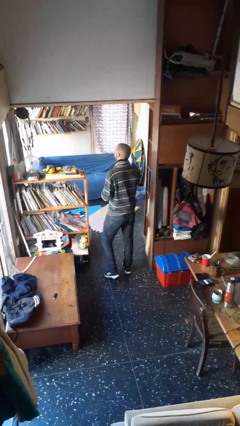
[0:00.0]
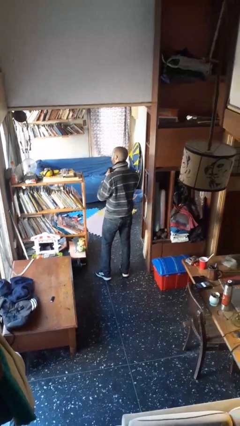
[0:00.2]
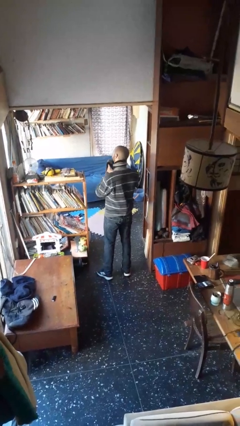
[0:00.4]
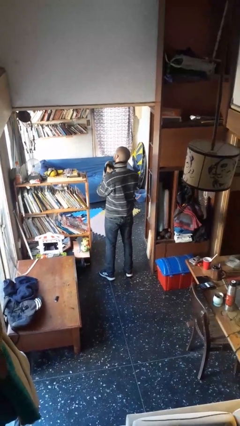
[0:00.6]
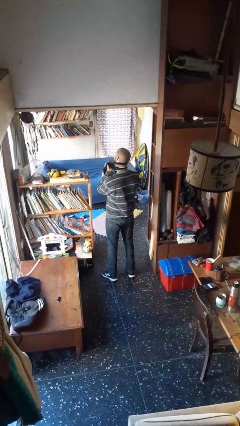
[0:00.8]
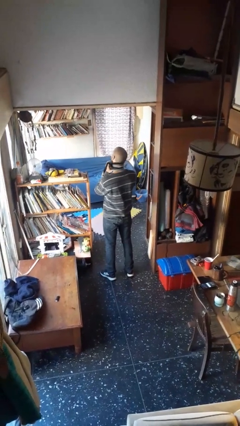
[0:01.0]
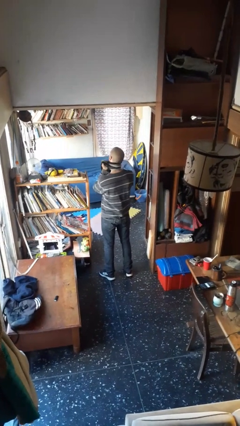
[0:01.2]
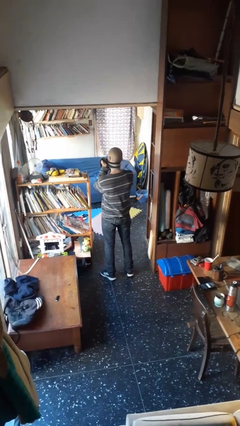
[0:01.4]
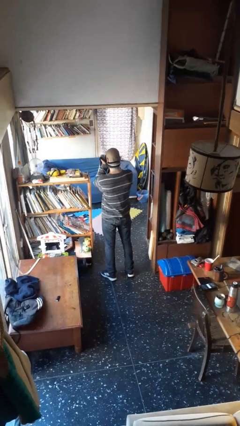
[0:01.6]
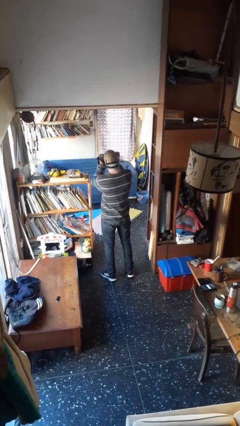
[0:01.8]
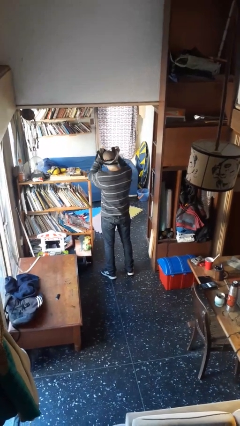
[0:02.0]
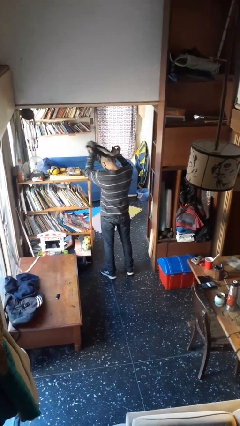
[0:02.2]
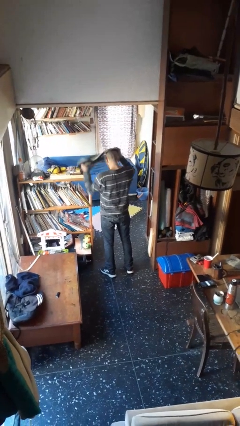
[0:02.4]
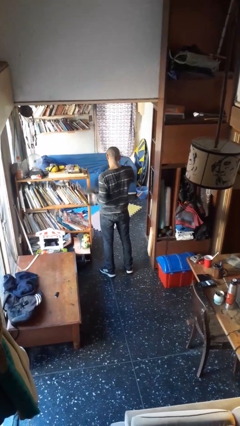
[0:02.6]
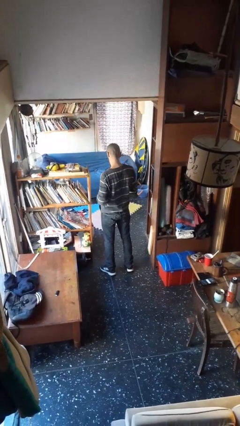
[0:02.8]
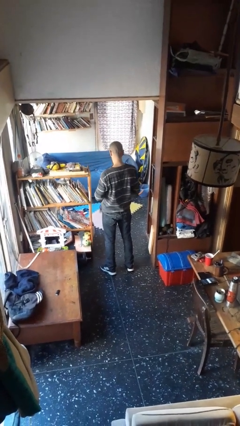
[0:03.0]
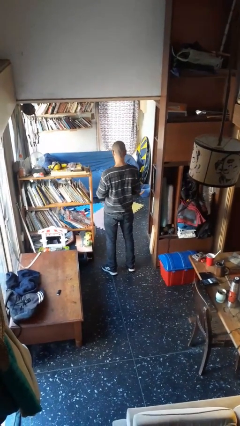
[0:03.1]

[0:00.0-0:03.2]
person takes off scarf

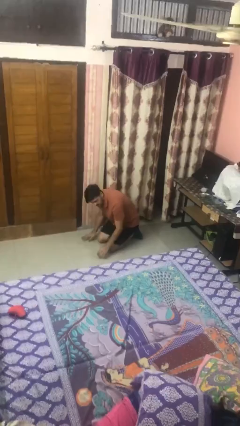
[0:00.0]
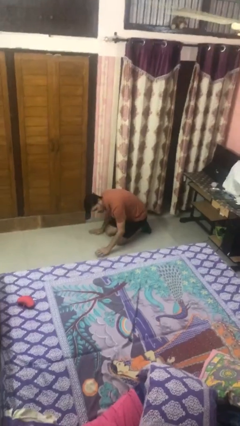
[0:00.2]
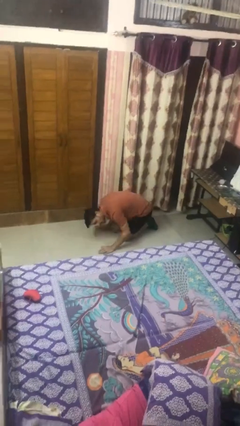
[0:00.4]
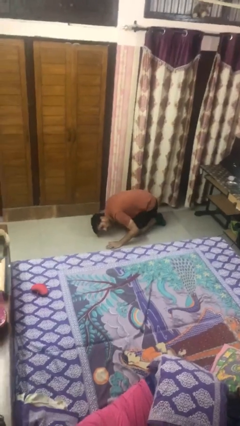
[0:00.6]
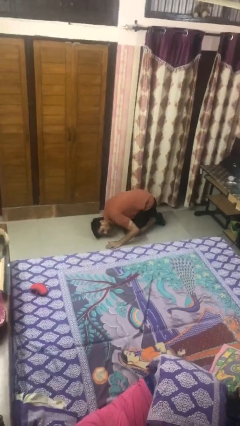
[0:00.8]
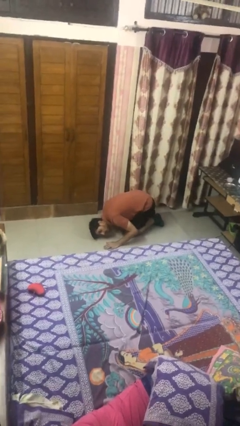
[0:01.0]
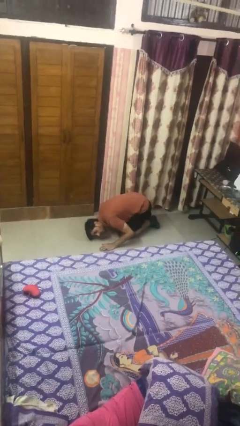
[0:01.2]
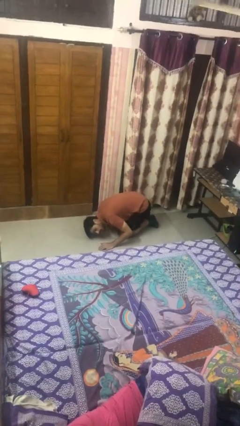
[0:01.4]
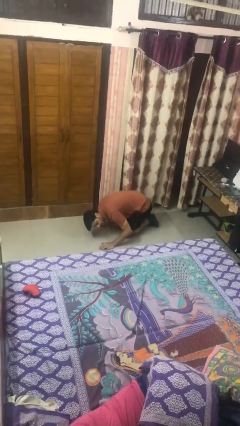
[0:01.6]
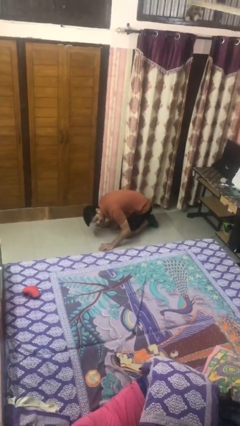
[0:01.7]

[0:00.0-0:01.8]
person searches under bed

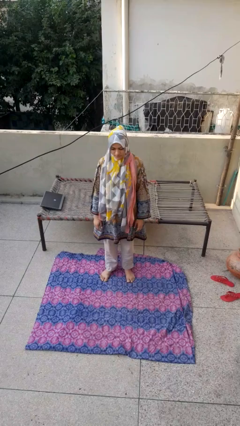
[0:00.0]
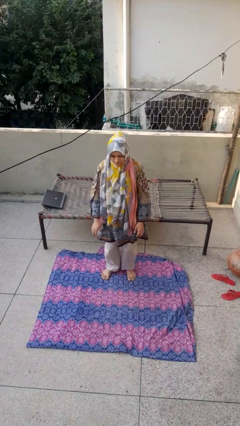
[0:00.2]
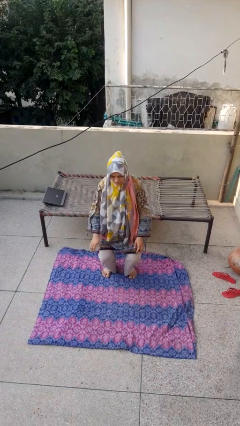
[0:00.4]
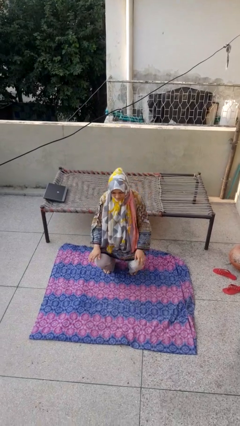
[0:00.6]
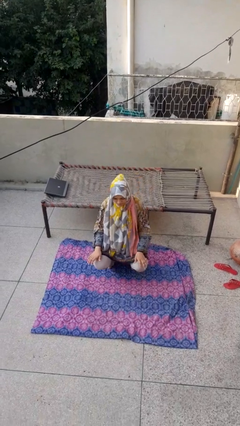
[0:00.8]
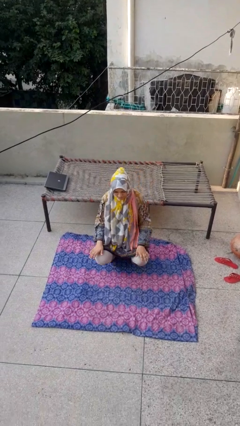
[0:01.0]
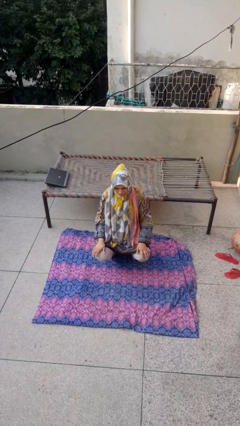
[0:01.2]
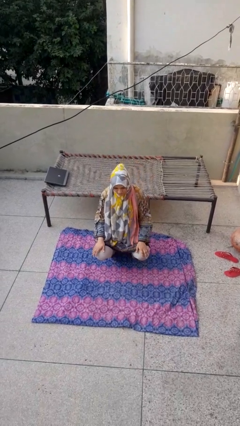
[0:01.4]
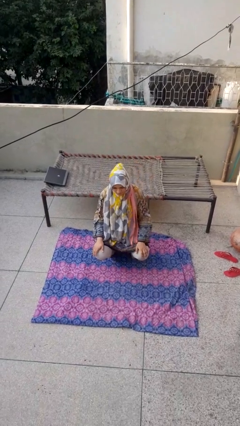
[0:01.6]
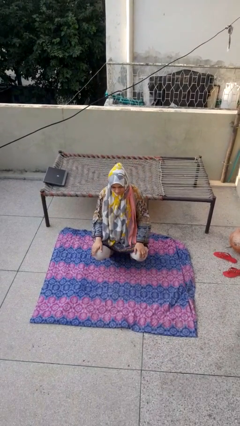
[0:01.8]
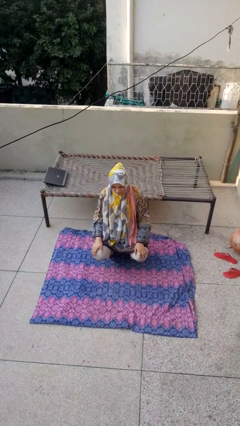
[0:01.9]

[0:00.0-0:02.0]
person squats

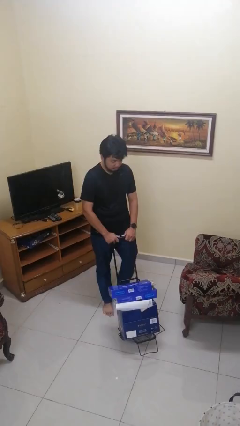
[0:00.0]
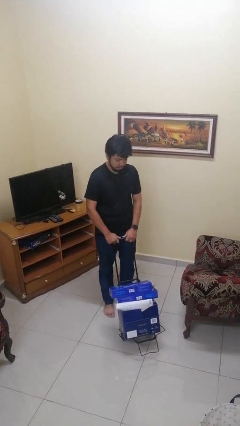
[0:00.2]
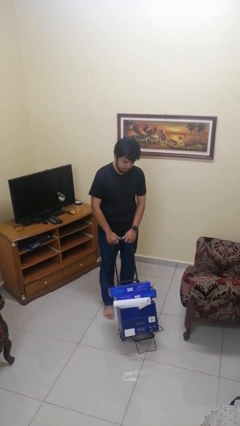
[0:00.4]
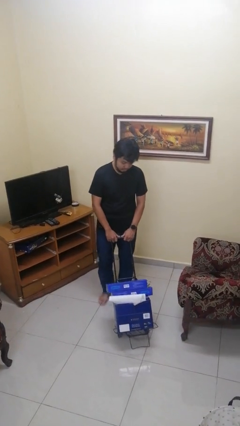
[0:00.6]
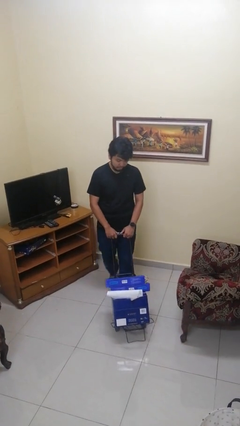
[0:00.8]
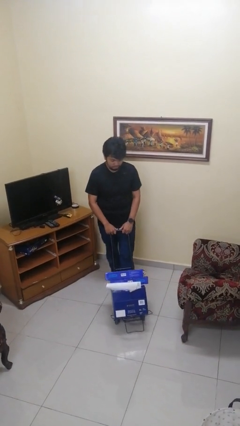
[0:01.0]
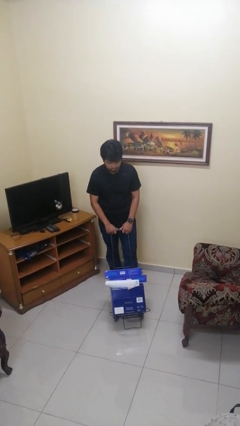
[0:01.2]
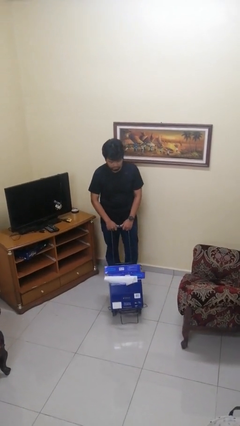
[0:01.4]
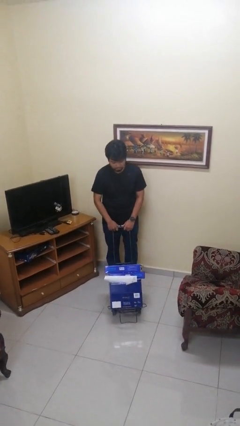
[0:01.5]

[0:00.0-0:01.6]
person pulls wheeled cart

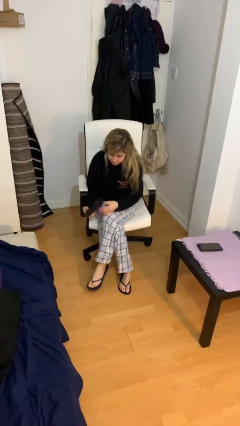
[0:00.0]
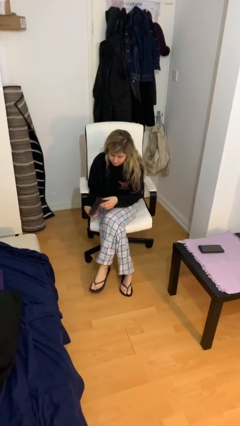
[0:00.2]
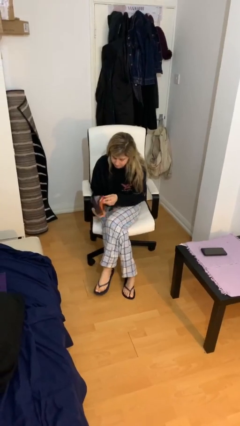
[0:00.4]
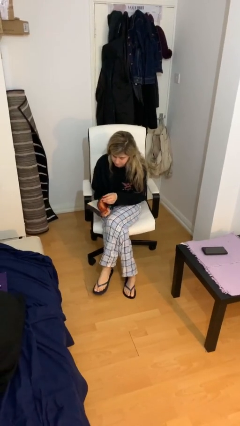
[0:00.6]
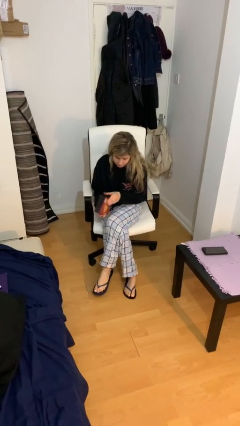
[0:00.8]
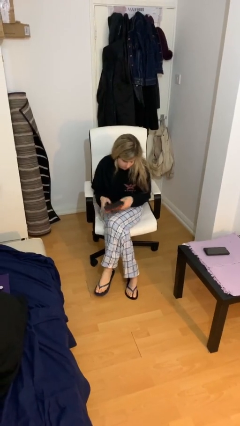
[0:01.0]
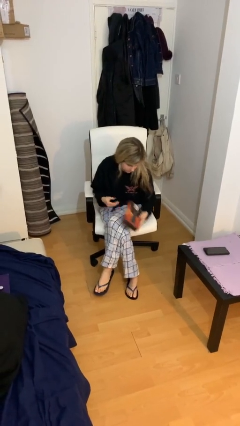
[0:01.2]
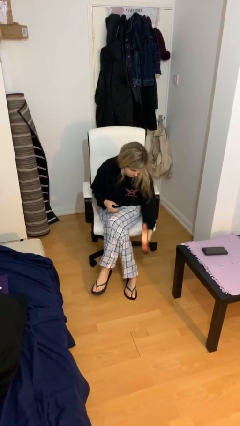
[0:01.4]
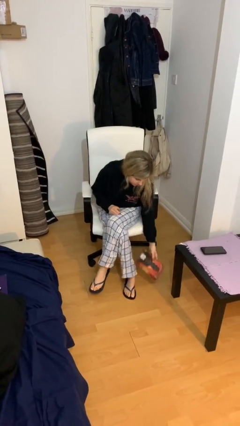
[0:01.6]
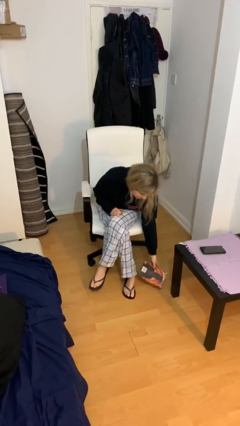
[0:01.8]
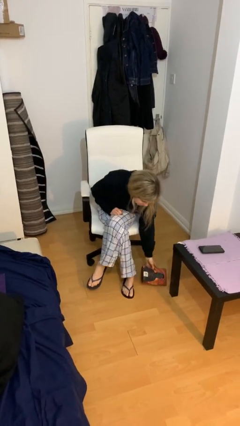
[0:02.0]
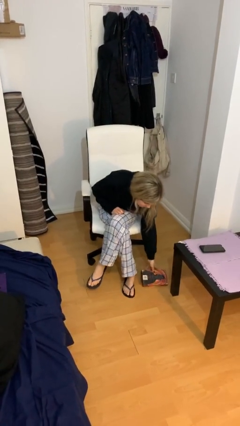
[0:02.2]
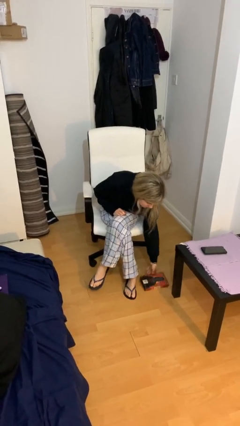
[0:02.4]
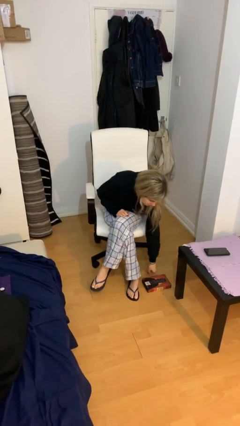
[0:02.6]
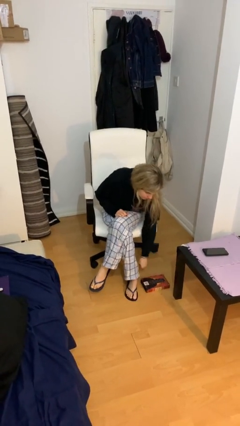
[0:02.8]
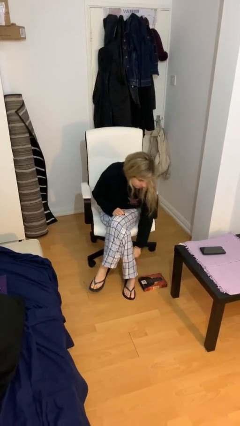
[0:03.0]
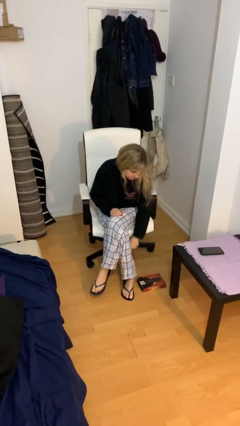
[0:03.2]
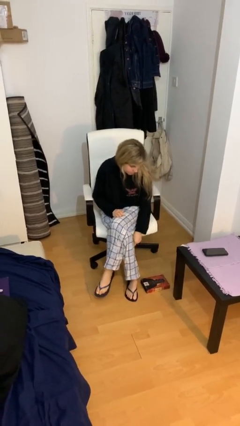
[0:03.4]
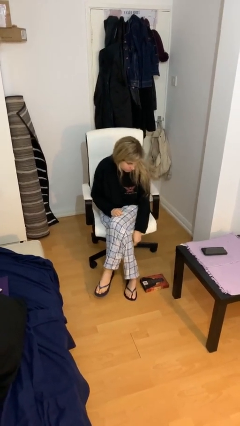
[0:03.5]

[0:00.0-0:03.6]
person puts down object on floor

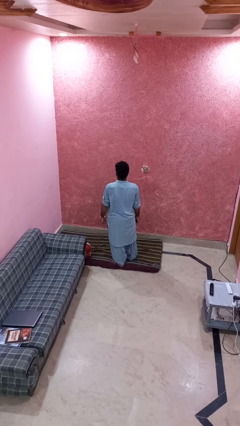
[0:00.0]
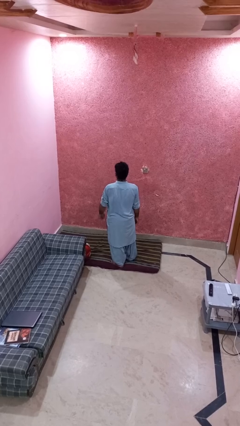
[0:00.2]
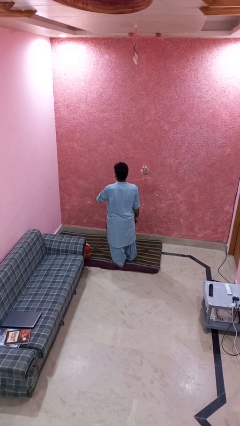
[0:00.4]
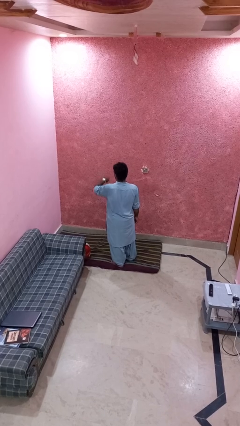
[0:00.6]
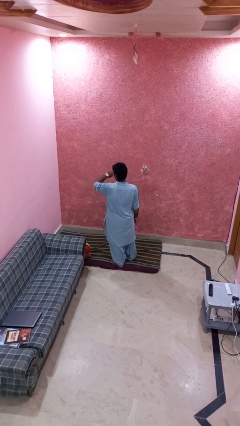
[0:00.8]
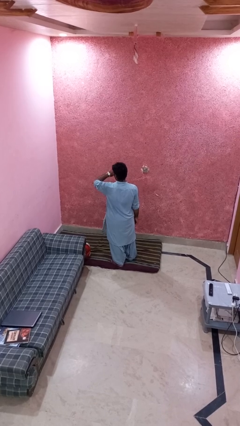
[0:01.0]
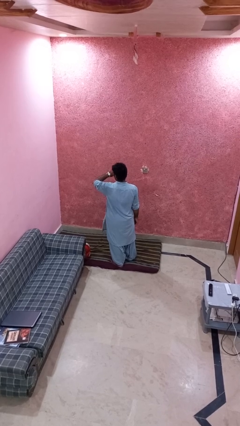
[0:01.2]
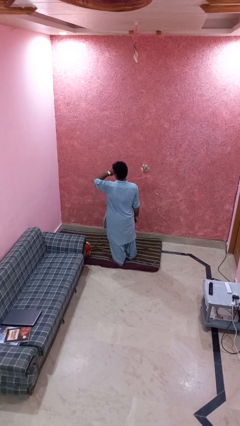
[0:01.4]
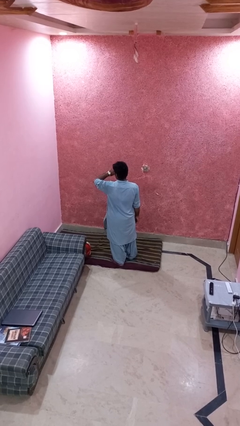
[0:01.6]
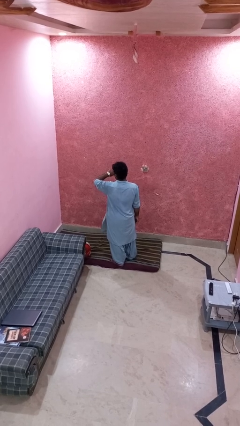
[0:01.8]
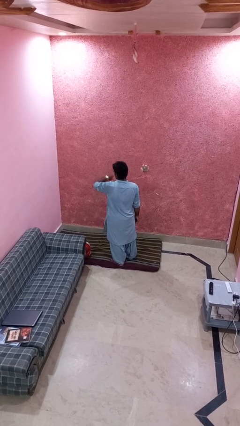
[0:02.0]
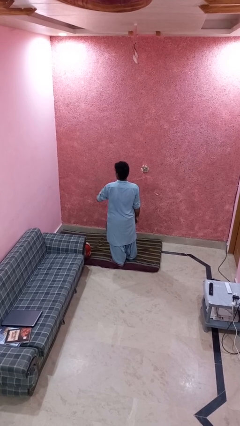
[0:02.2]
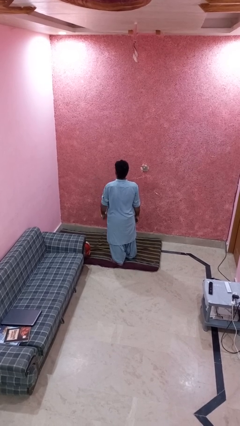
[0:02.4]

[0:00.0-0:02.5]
person looks at wristwatch

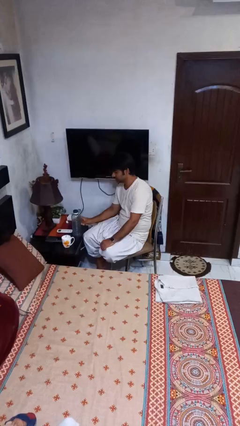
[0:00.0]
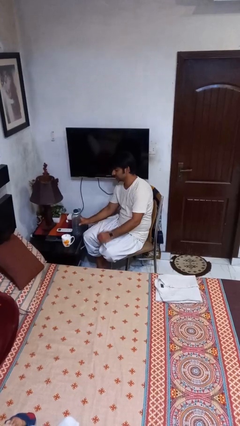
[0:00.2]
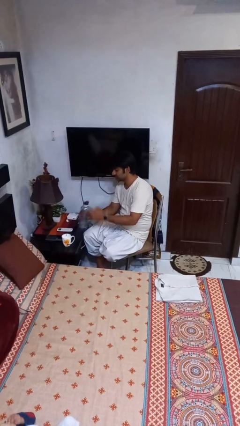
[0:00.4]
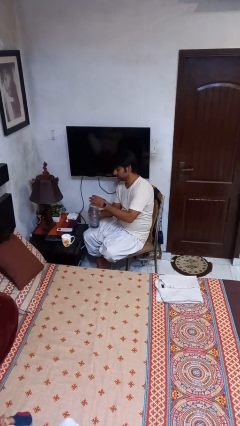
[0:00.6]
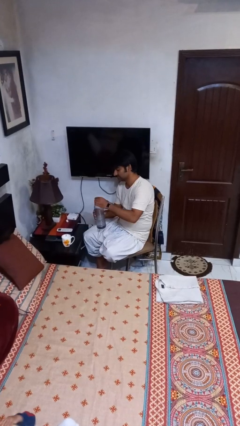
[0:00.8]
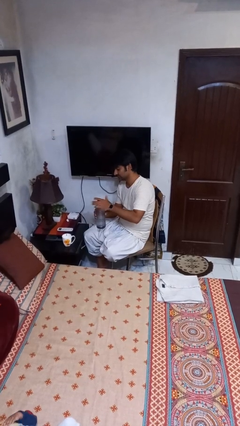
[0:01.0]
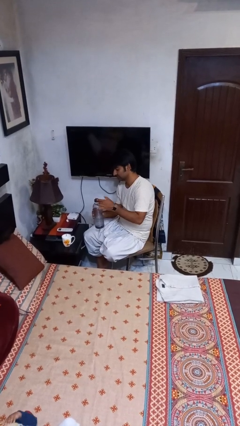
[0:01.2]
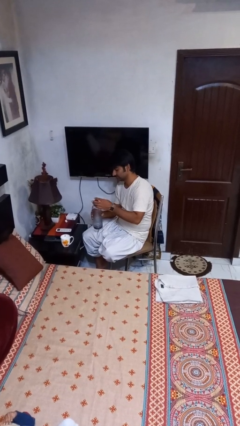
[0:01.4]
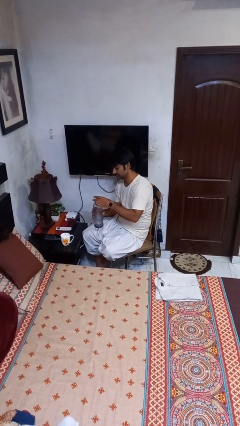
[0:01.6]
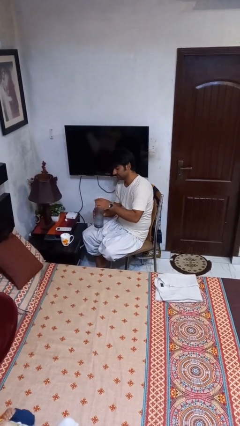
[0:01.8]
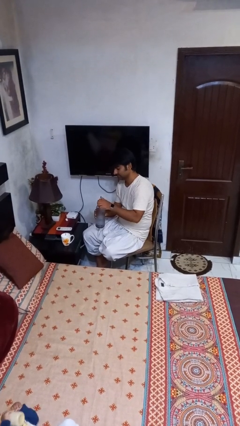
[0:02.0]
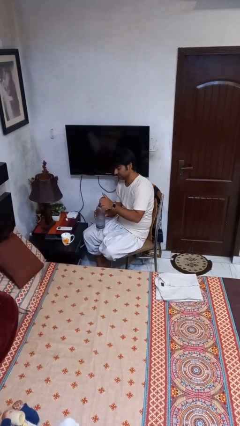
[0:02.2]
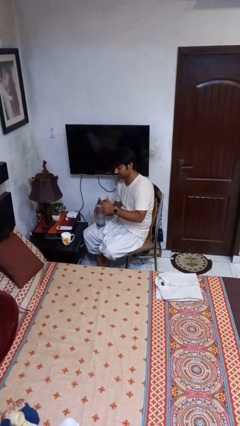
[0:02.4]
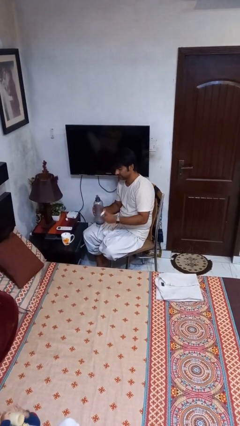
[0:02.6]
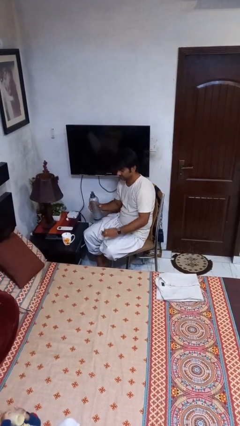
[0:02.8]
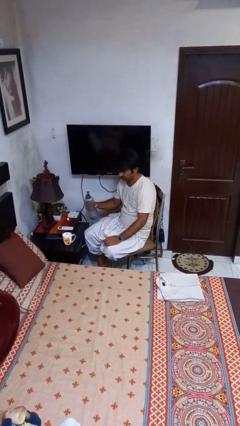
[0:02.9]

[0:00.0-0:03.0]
person unscrews lid from bottle
